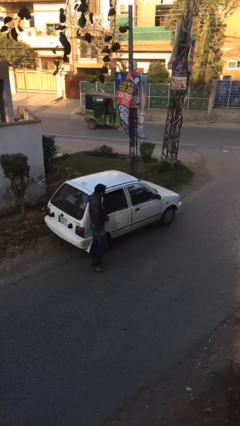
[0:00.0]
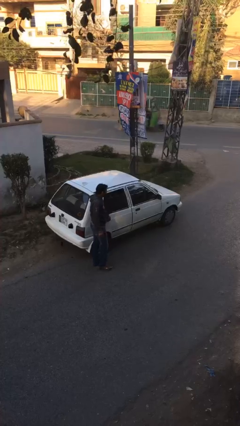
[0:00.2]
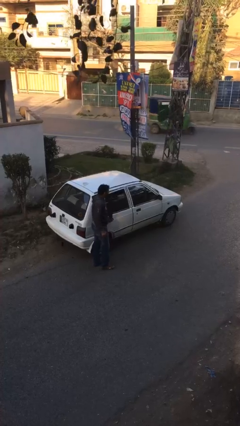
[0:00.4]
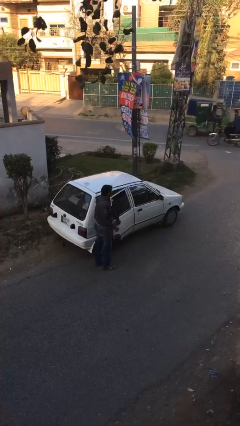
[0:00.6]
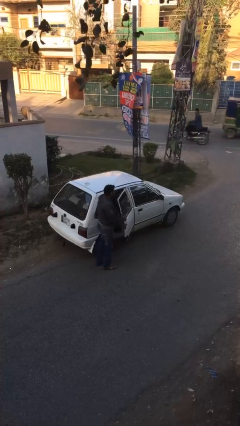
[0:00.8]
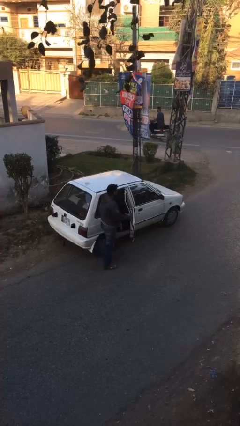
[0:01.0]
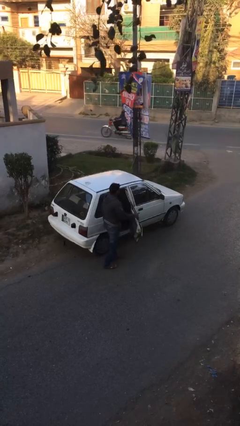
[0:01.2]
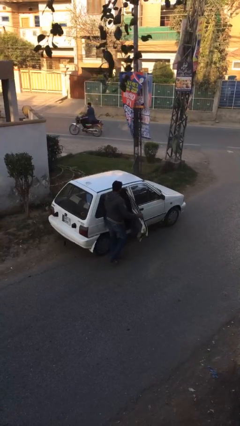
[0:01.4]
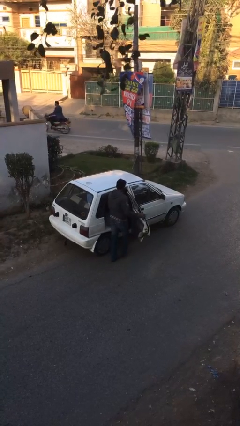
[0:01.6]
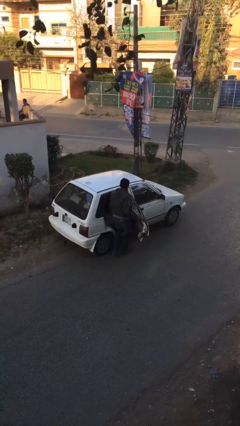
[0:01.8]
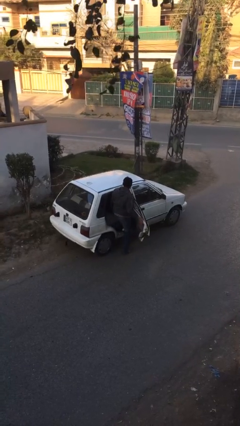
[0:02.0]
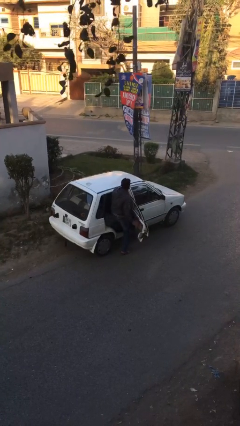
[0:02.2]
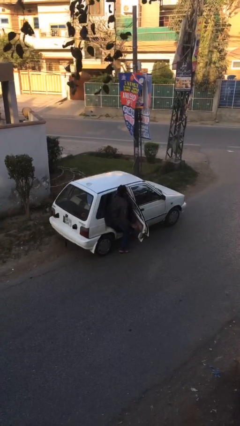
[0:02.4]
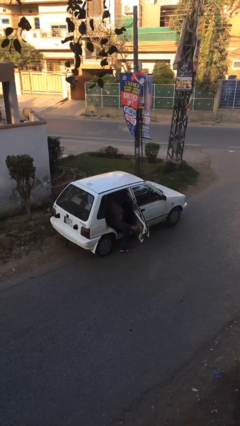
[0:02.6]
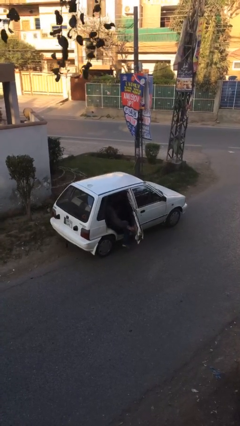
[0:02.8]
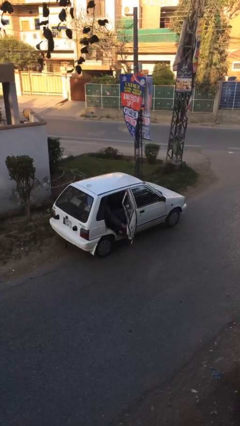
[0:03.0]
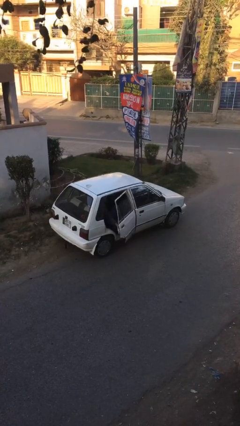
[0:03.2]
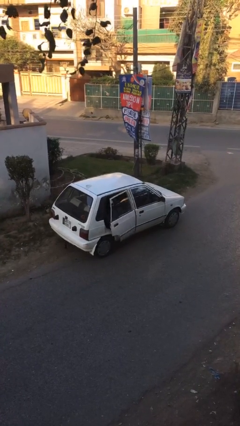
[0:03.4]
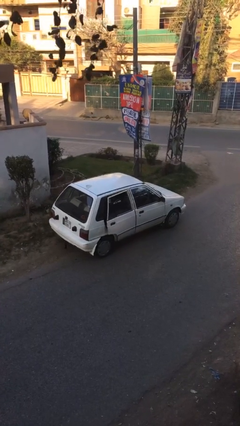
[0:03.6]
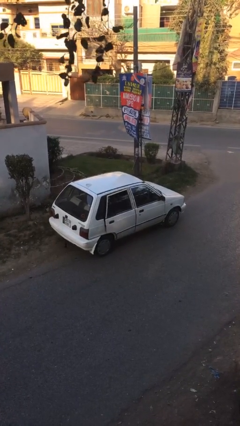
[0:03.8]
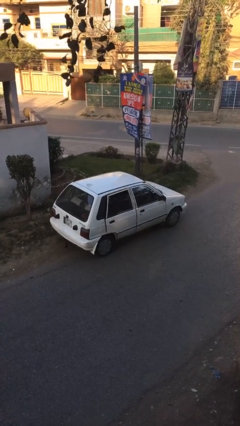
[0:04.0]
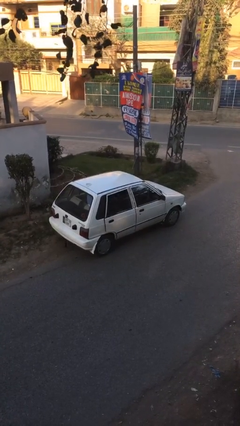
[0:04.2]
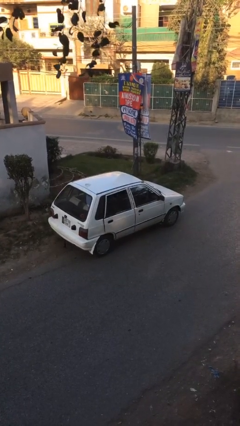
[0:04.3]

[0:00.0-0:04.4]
car picks up person

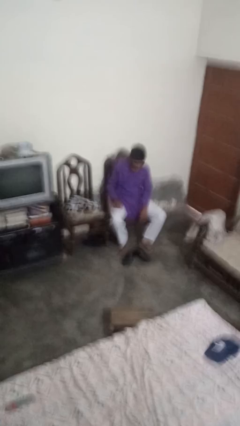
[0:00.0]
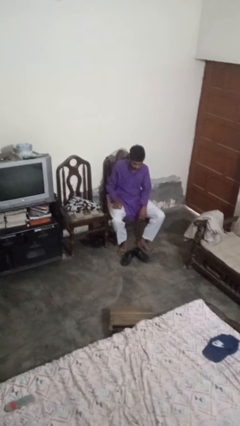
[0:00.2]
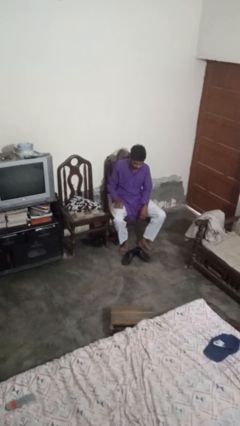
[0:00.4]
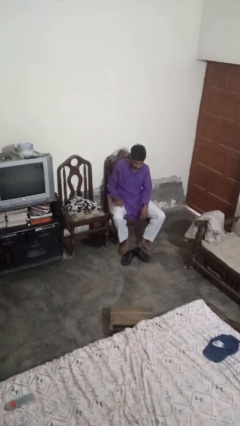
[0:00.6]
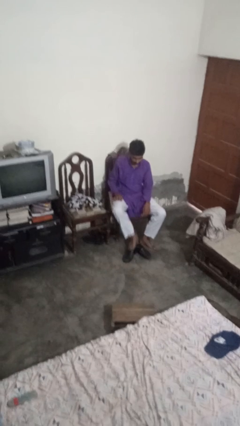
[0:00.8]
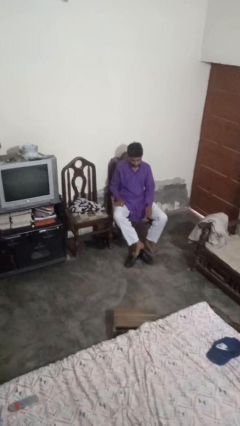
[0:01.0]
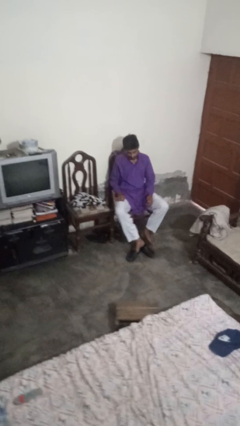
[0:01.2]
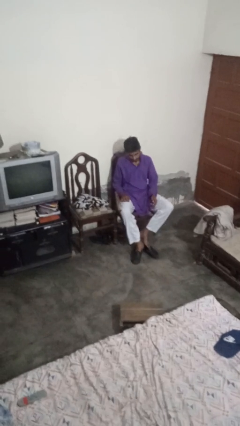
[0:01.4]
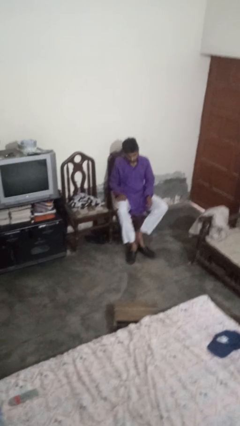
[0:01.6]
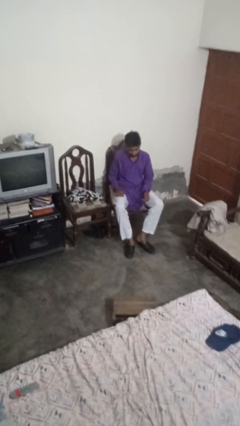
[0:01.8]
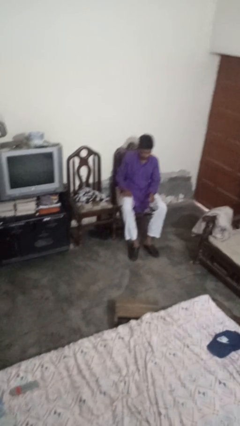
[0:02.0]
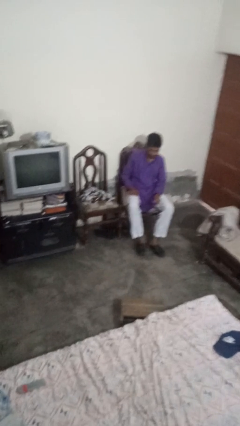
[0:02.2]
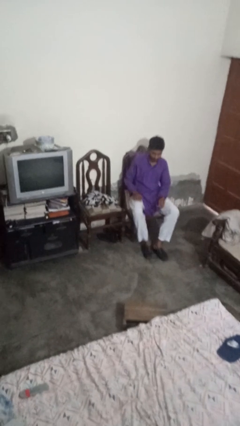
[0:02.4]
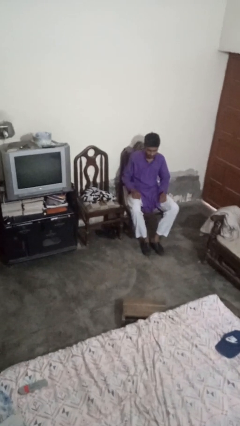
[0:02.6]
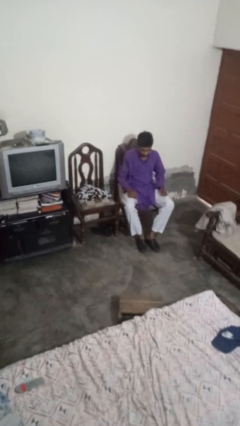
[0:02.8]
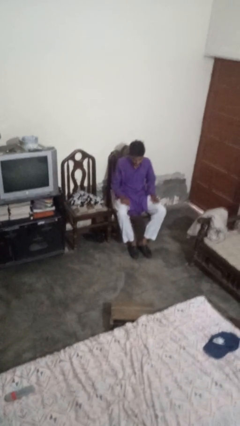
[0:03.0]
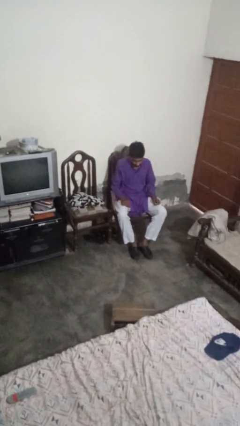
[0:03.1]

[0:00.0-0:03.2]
person puts on shoes

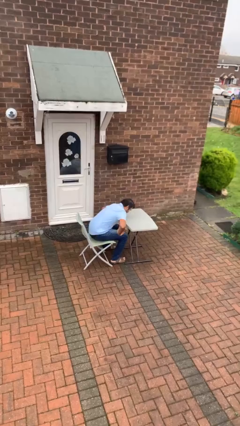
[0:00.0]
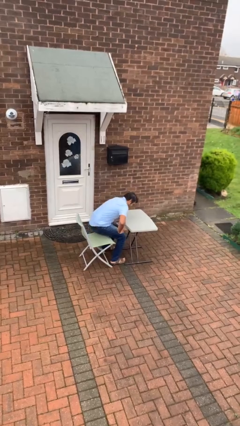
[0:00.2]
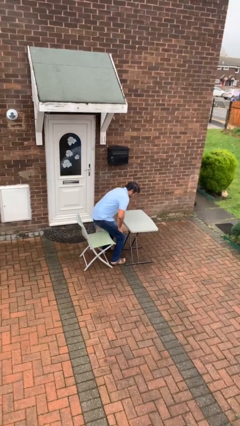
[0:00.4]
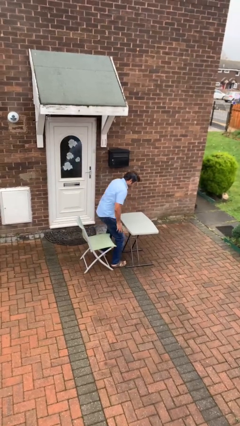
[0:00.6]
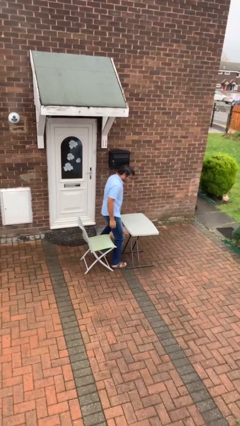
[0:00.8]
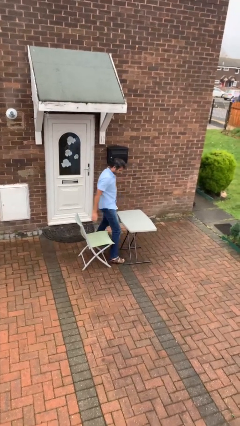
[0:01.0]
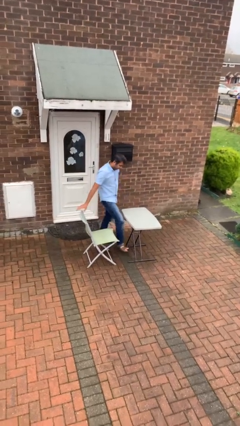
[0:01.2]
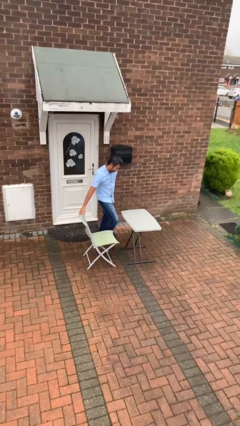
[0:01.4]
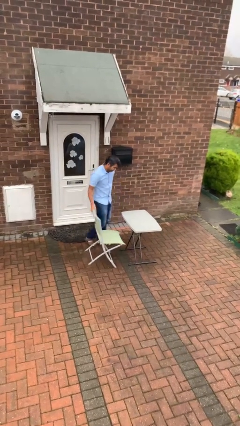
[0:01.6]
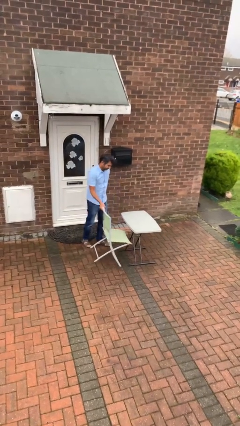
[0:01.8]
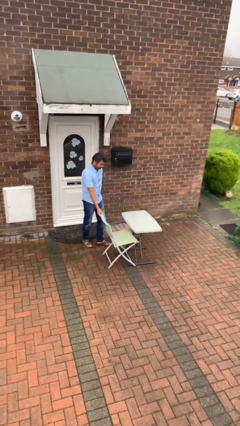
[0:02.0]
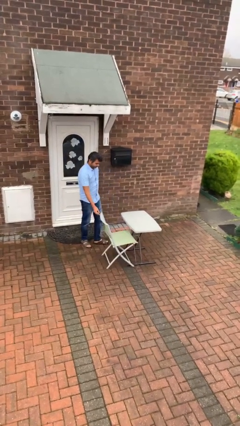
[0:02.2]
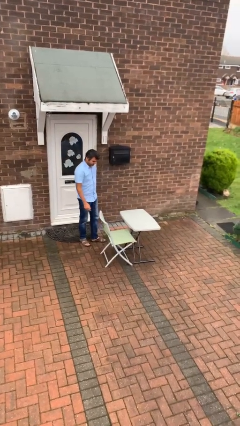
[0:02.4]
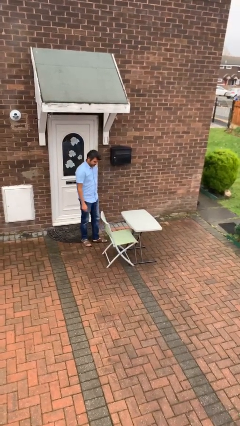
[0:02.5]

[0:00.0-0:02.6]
person stands up

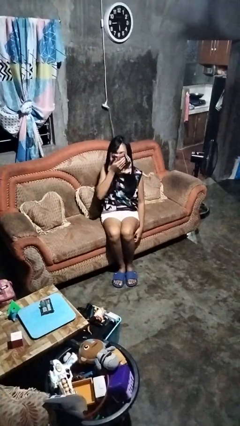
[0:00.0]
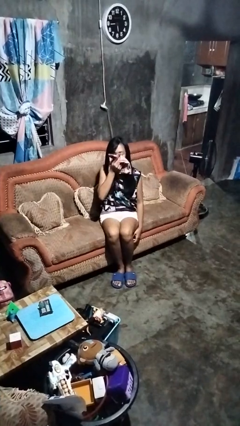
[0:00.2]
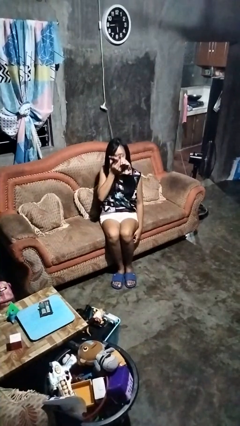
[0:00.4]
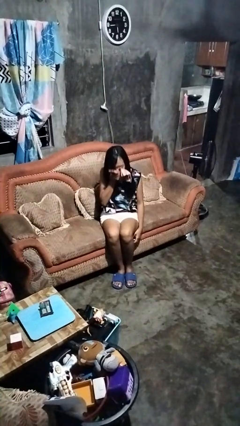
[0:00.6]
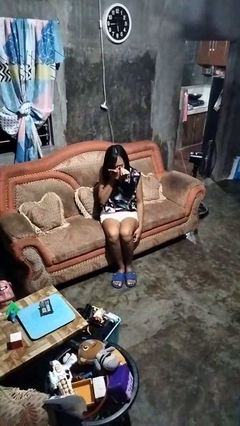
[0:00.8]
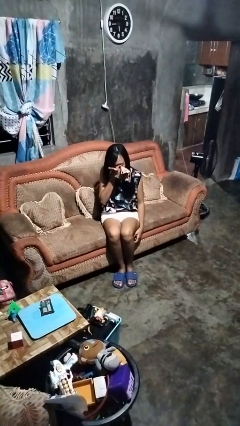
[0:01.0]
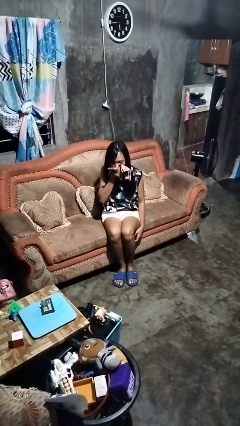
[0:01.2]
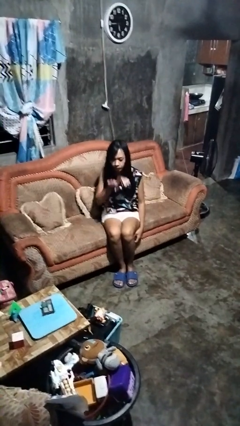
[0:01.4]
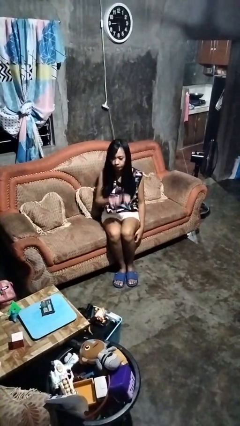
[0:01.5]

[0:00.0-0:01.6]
person blows nose

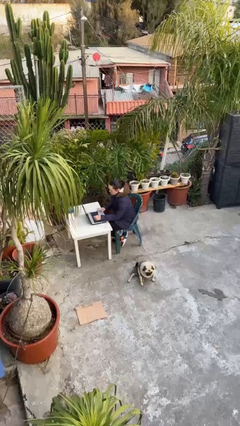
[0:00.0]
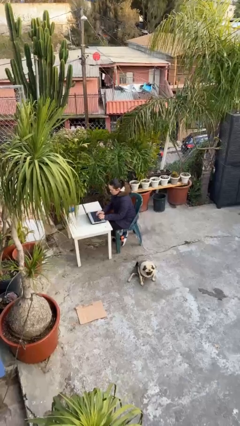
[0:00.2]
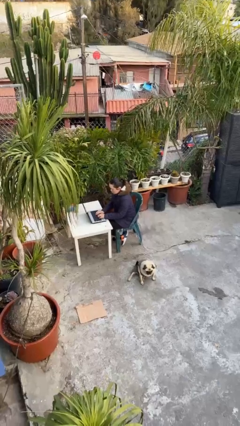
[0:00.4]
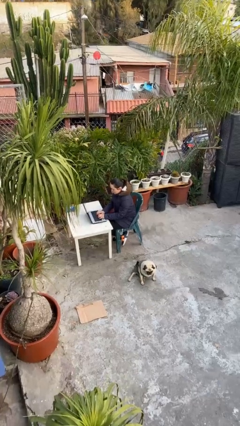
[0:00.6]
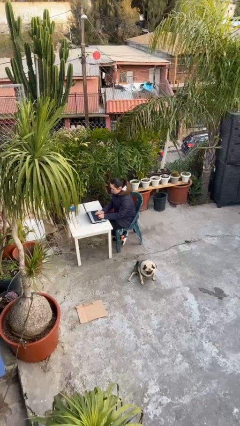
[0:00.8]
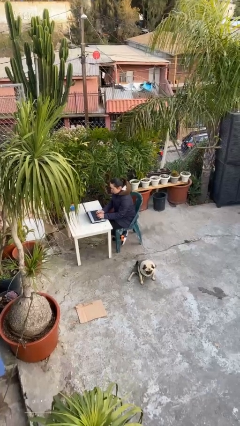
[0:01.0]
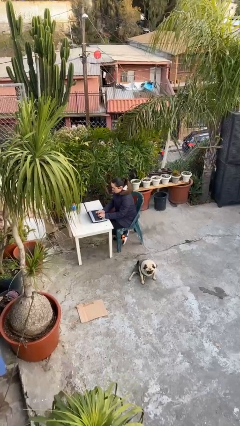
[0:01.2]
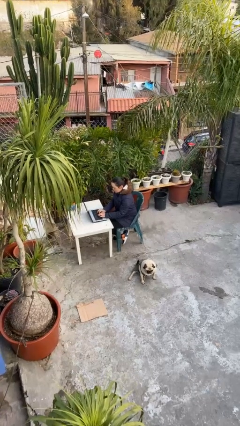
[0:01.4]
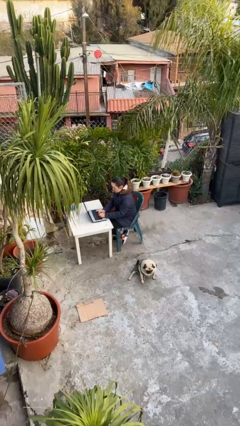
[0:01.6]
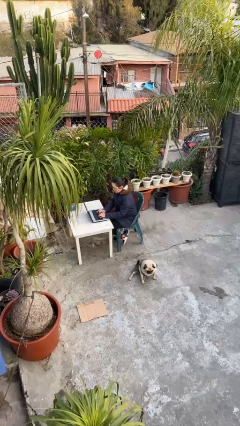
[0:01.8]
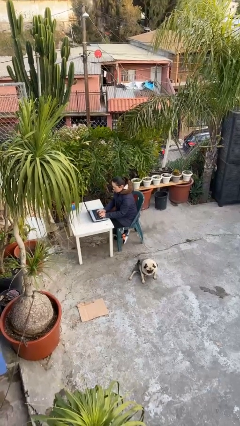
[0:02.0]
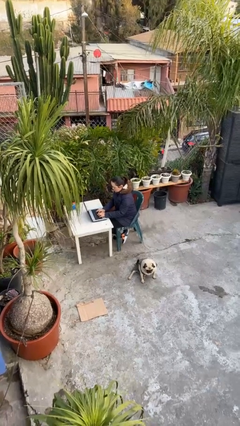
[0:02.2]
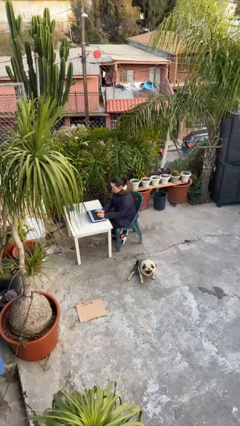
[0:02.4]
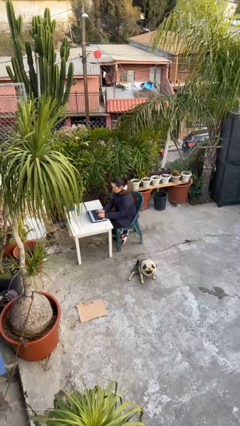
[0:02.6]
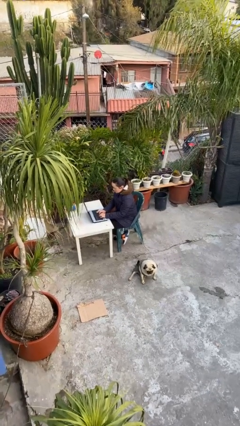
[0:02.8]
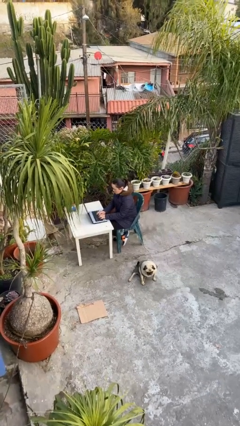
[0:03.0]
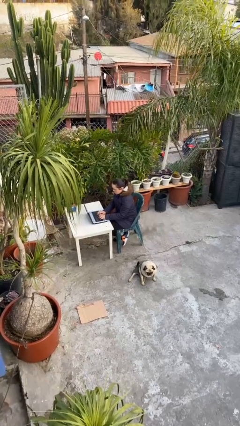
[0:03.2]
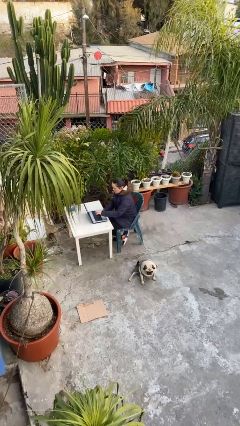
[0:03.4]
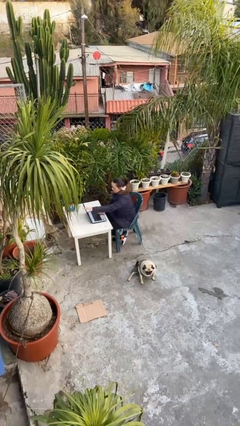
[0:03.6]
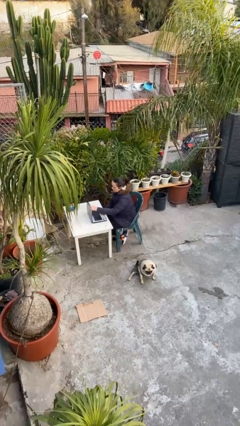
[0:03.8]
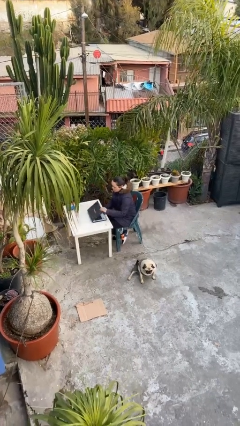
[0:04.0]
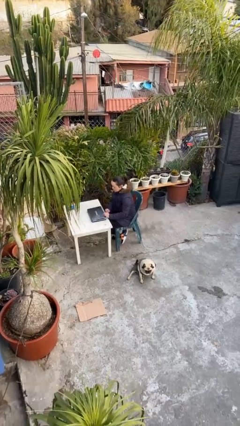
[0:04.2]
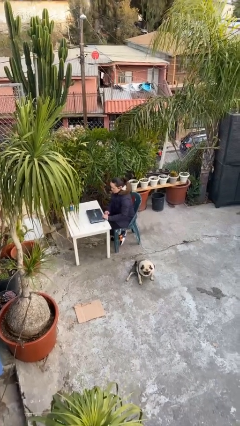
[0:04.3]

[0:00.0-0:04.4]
person interacts with laptop

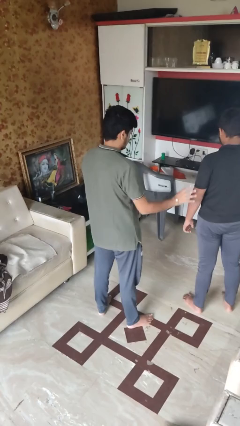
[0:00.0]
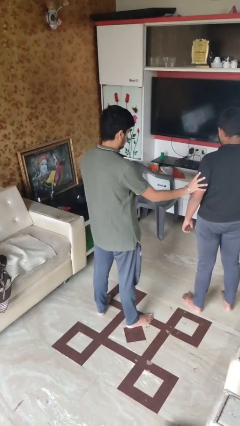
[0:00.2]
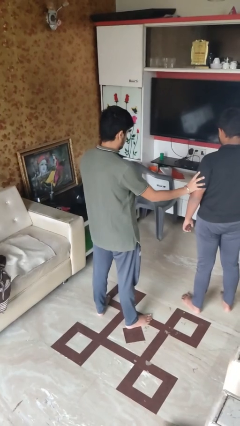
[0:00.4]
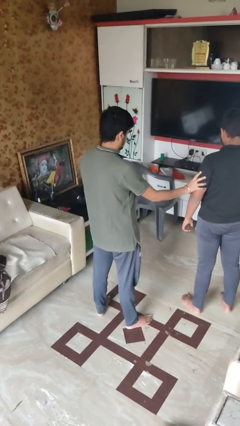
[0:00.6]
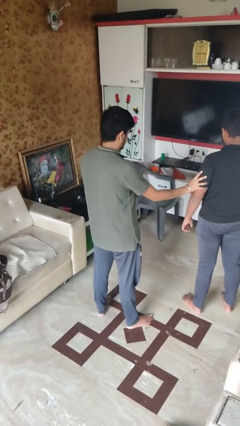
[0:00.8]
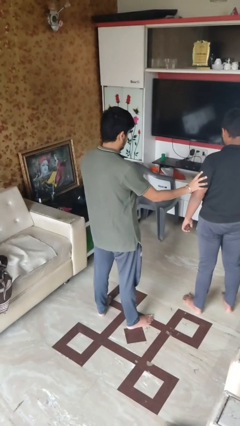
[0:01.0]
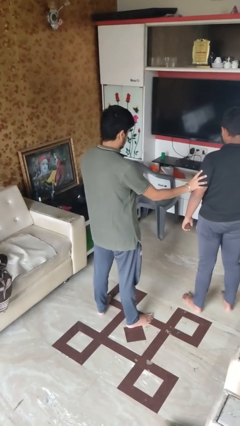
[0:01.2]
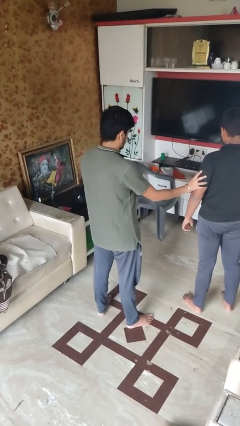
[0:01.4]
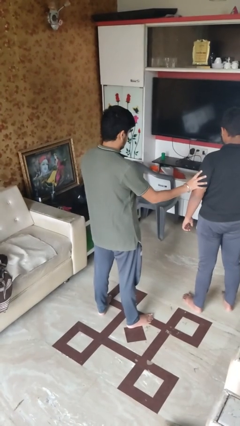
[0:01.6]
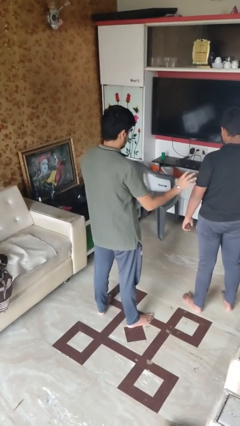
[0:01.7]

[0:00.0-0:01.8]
person grabs person by bicep
